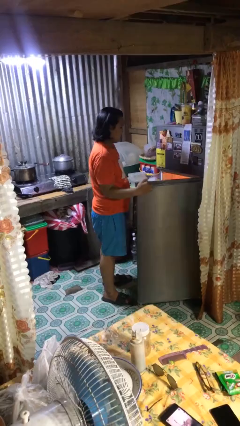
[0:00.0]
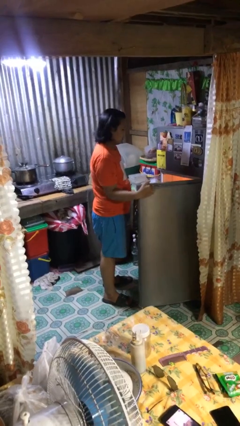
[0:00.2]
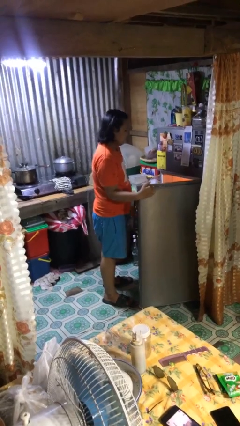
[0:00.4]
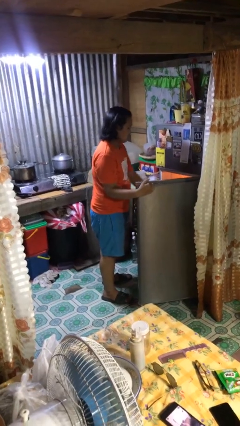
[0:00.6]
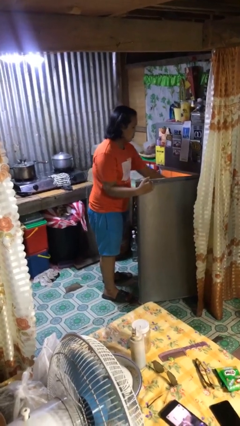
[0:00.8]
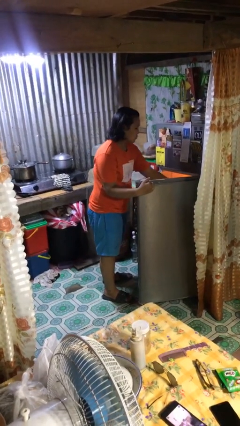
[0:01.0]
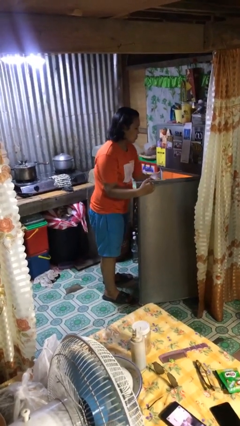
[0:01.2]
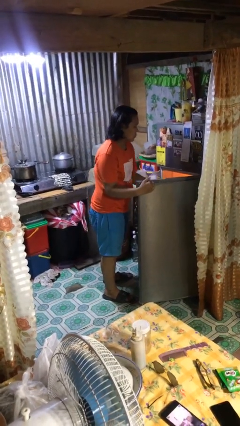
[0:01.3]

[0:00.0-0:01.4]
person takes object from refrigerator

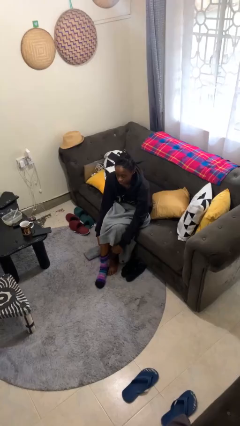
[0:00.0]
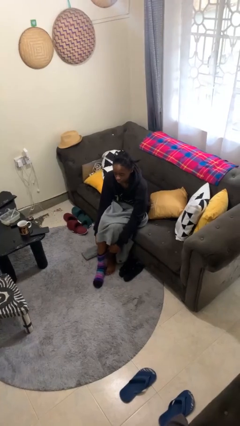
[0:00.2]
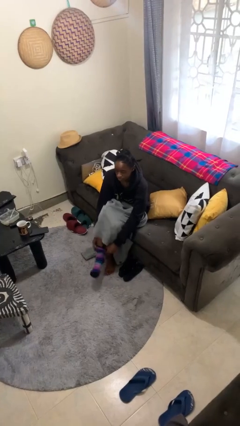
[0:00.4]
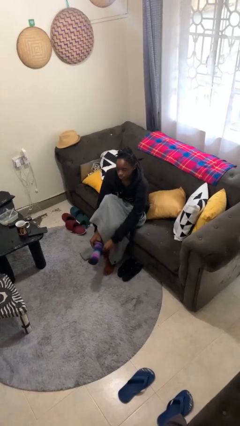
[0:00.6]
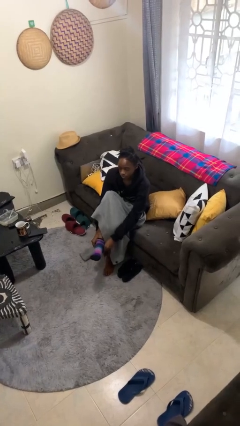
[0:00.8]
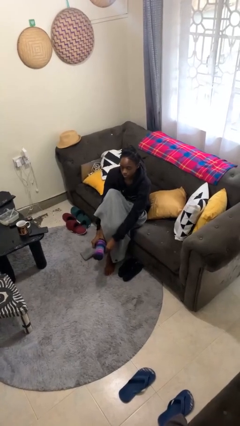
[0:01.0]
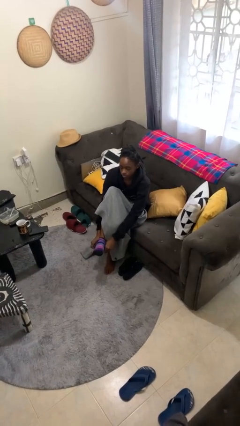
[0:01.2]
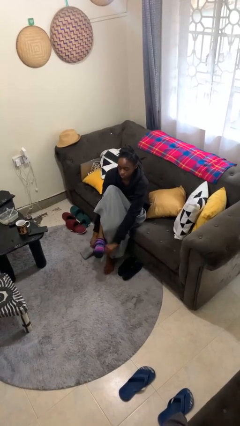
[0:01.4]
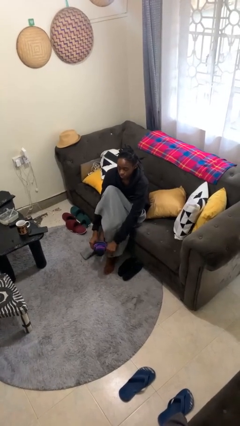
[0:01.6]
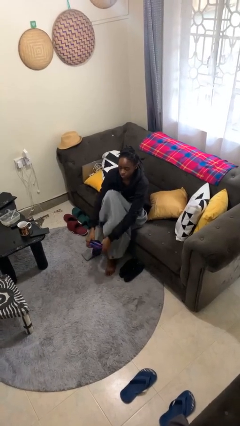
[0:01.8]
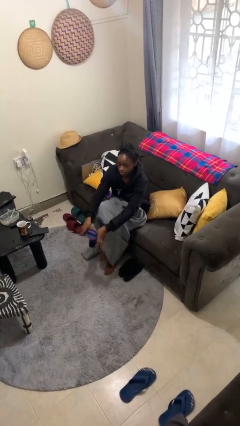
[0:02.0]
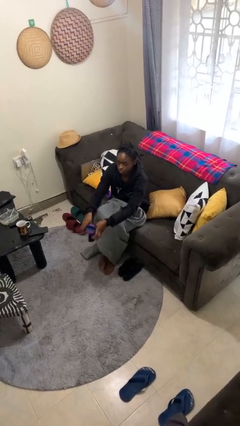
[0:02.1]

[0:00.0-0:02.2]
person takes off socks

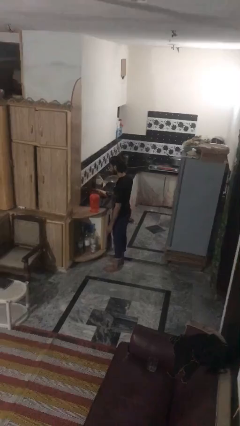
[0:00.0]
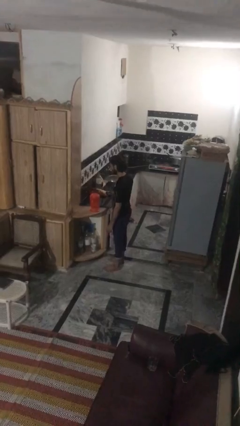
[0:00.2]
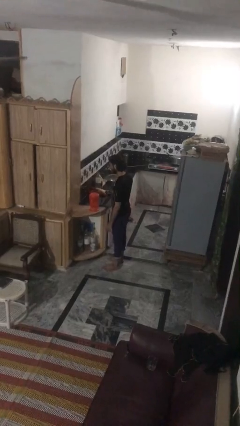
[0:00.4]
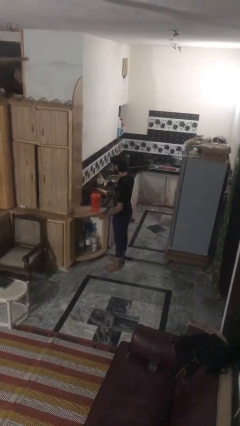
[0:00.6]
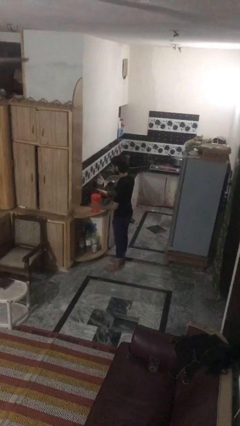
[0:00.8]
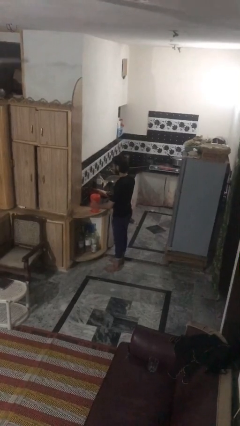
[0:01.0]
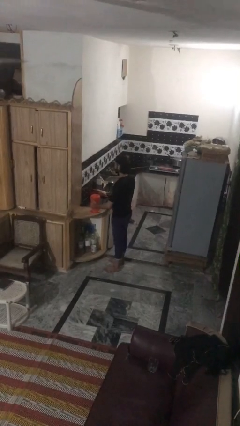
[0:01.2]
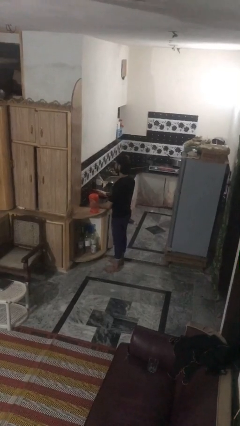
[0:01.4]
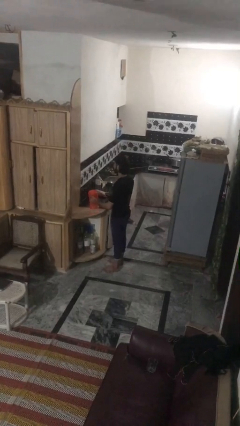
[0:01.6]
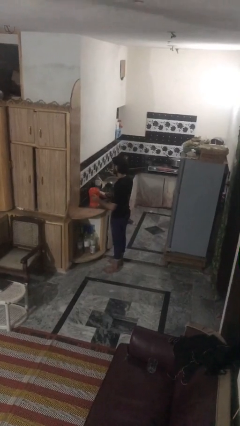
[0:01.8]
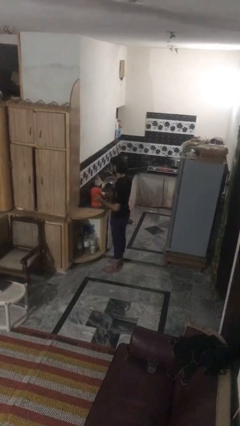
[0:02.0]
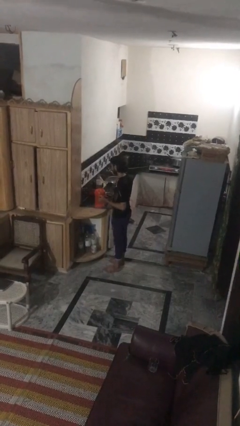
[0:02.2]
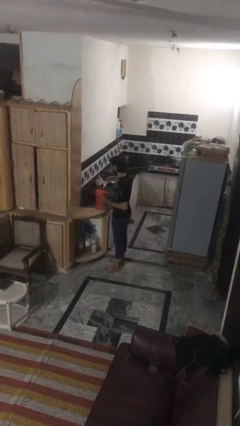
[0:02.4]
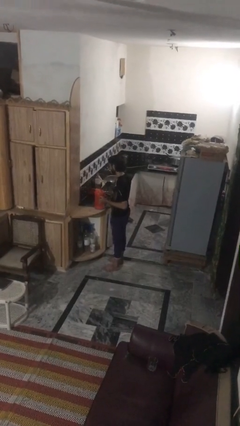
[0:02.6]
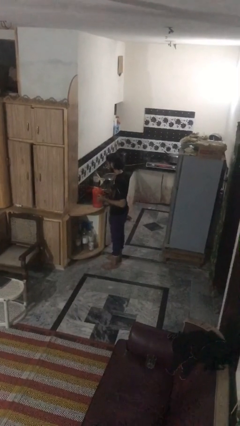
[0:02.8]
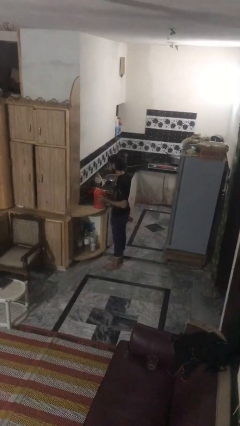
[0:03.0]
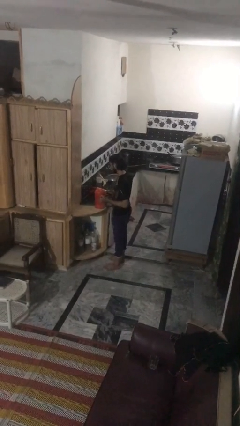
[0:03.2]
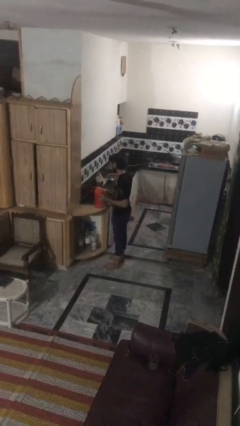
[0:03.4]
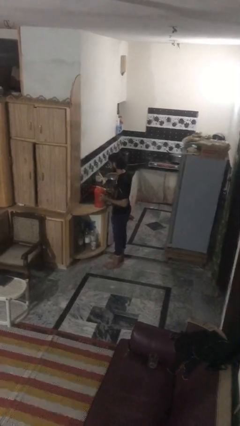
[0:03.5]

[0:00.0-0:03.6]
person picks up object from countertop

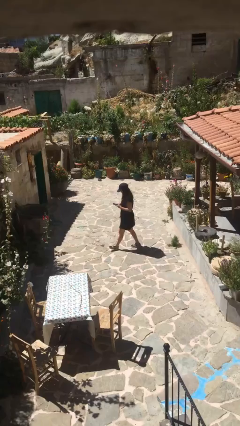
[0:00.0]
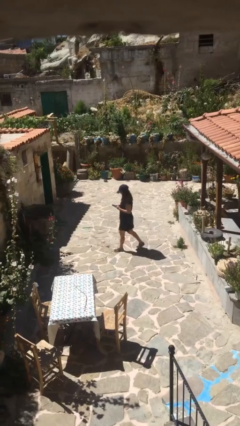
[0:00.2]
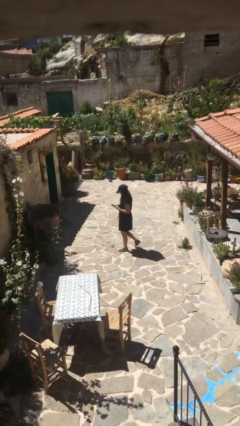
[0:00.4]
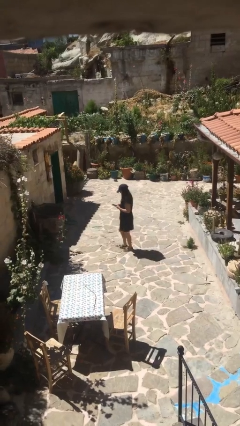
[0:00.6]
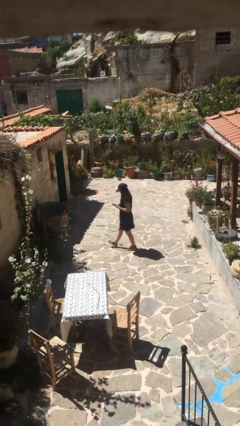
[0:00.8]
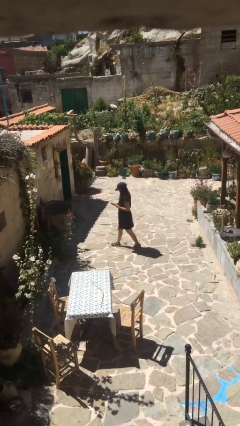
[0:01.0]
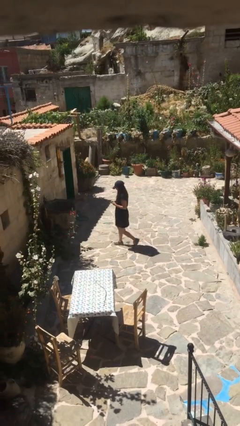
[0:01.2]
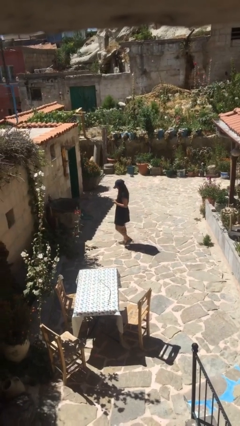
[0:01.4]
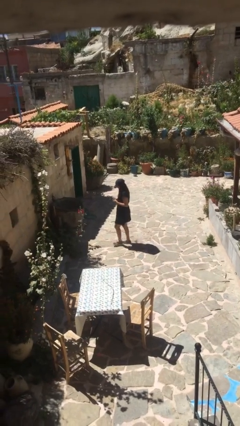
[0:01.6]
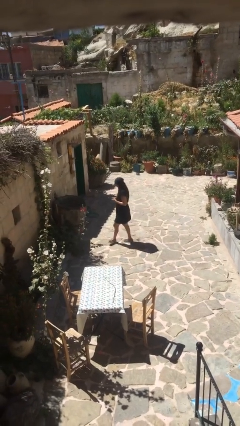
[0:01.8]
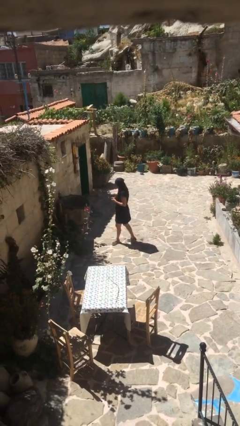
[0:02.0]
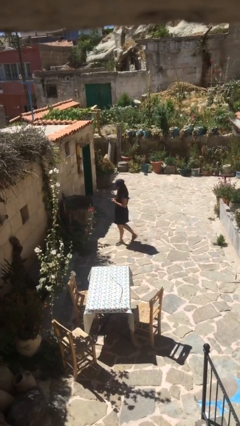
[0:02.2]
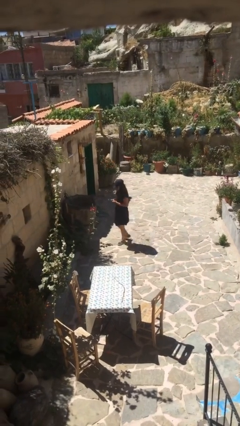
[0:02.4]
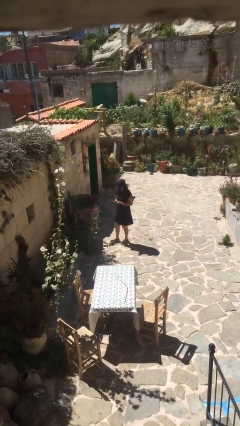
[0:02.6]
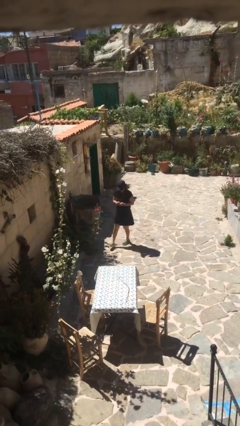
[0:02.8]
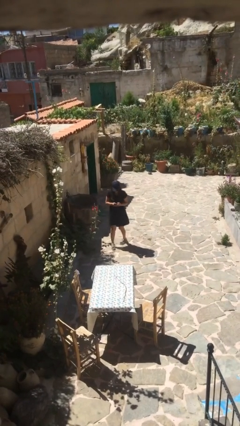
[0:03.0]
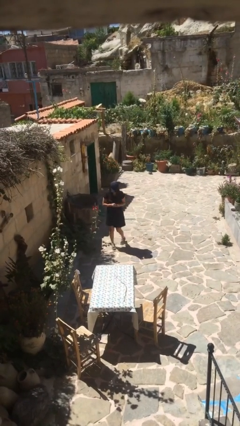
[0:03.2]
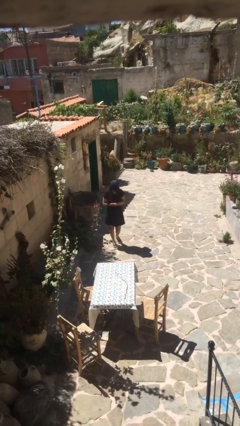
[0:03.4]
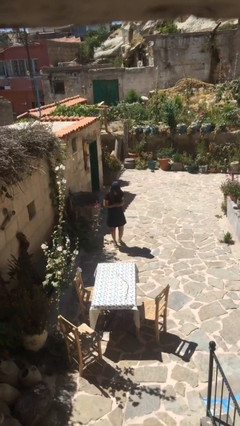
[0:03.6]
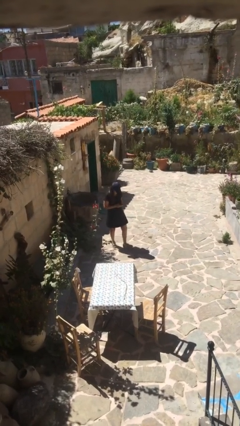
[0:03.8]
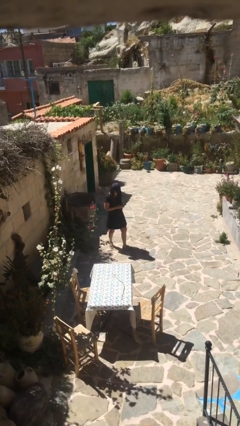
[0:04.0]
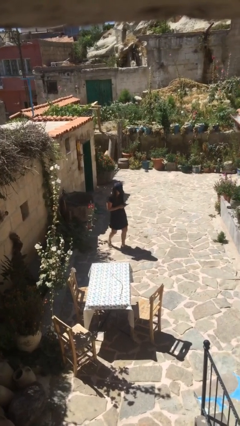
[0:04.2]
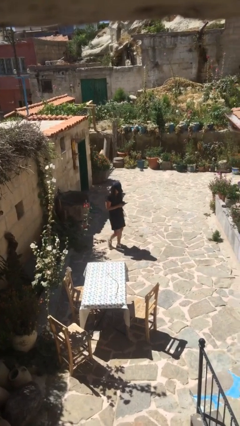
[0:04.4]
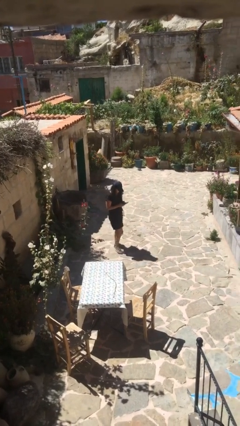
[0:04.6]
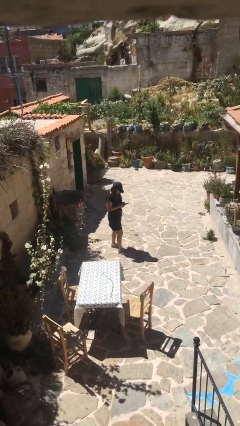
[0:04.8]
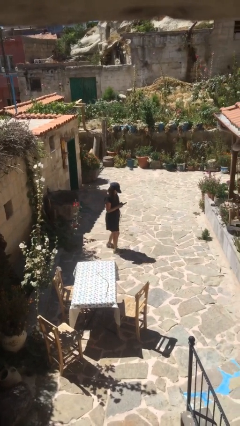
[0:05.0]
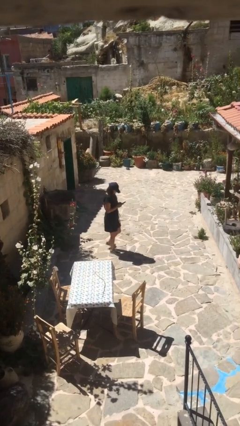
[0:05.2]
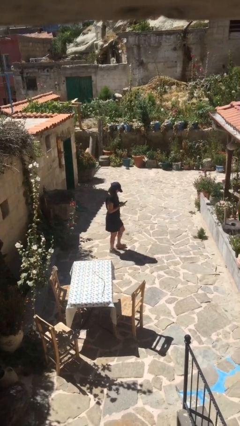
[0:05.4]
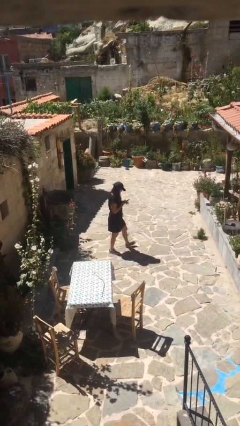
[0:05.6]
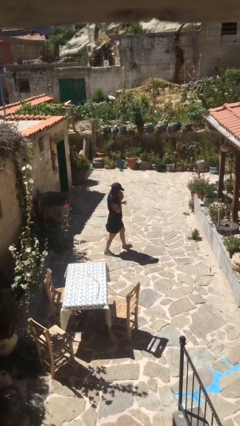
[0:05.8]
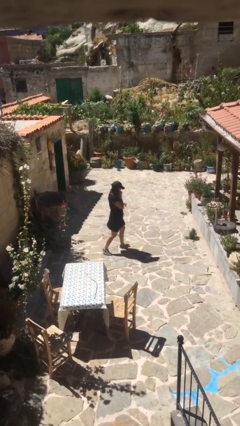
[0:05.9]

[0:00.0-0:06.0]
person texts on phone

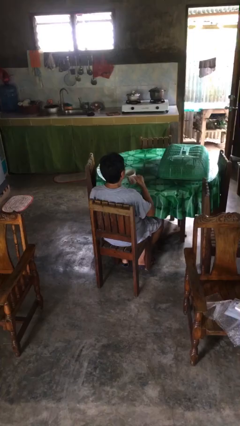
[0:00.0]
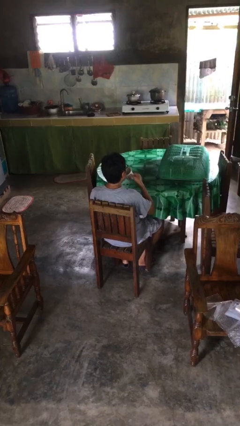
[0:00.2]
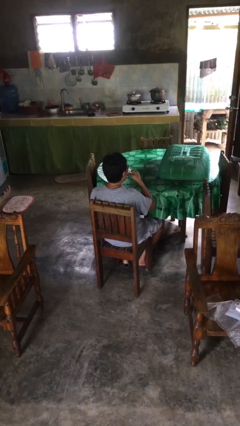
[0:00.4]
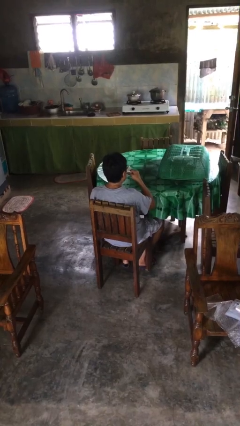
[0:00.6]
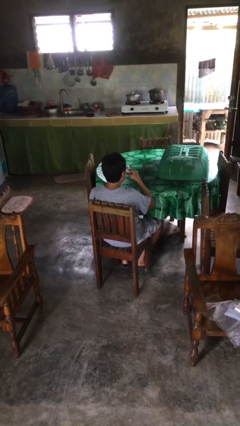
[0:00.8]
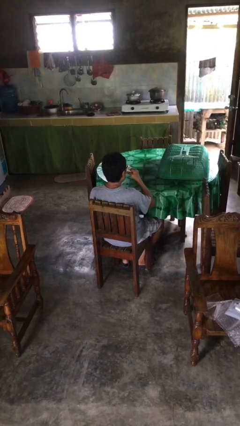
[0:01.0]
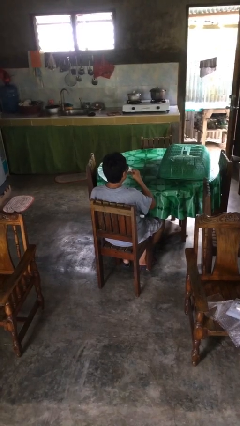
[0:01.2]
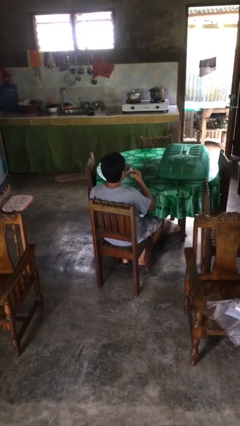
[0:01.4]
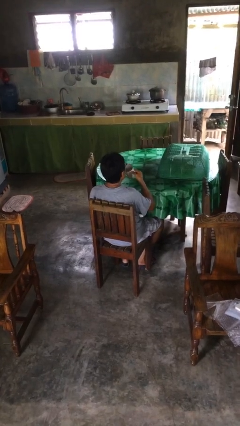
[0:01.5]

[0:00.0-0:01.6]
person drinks from mug

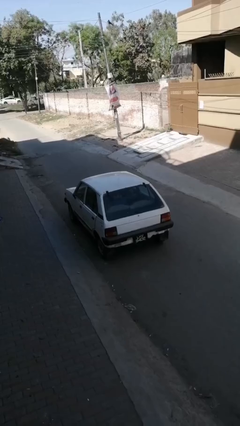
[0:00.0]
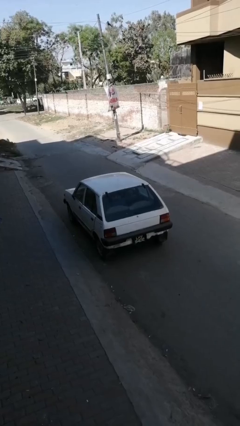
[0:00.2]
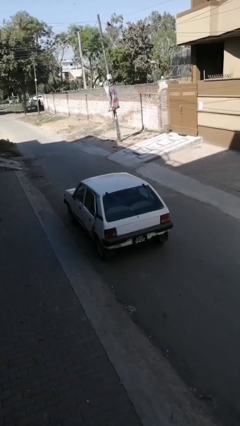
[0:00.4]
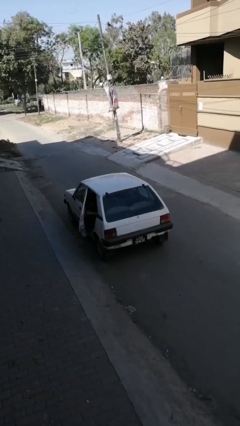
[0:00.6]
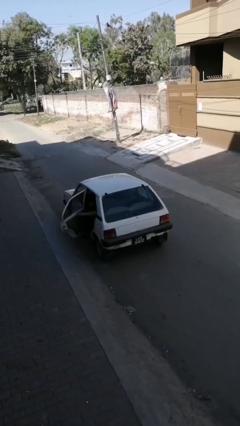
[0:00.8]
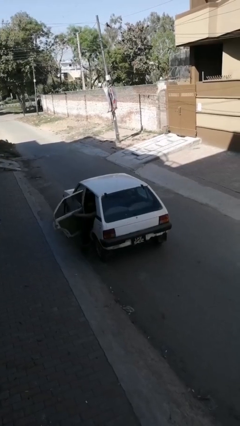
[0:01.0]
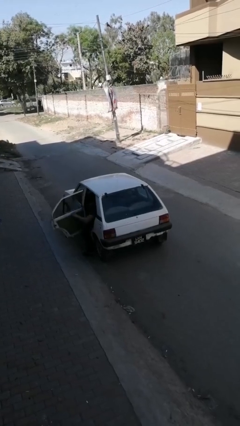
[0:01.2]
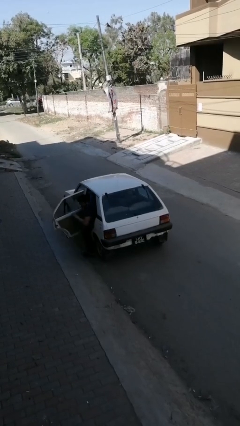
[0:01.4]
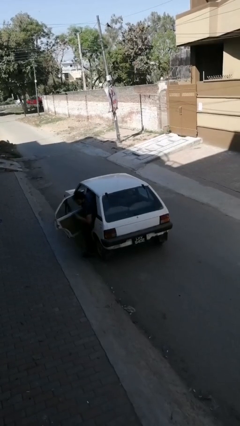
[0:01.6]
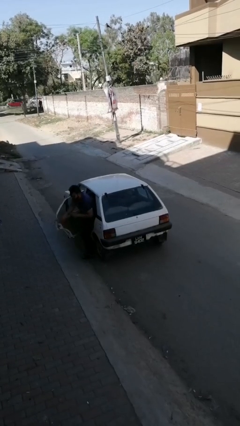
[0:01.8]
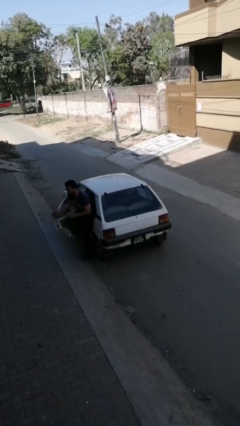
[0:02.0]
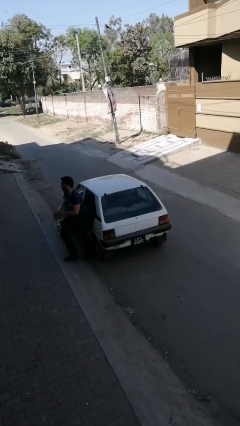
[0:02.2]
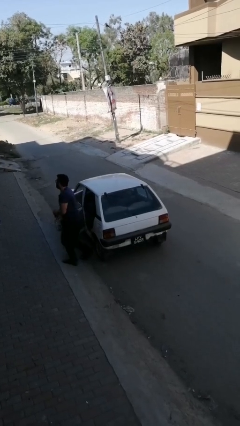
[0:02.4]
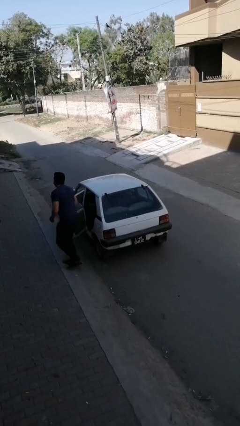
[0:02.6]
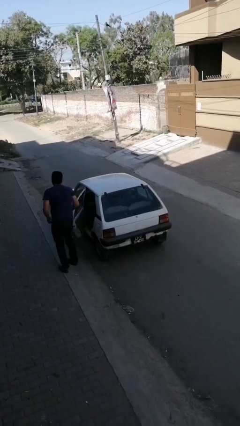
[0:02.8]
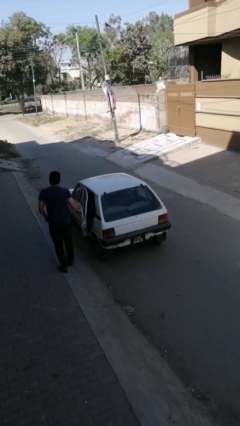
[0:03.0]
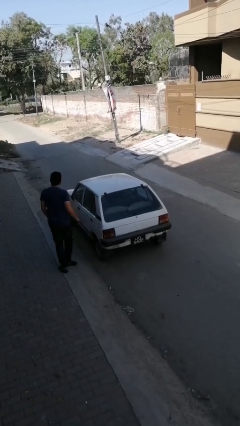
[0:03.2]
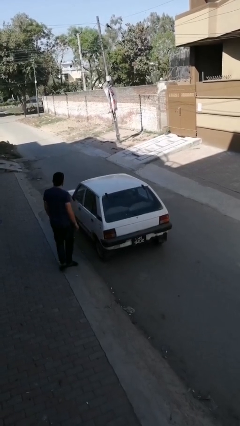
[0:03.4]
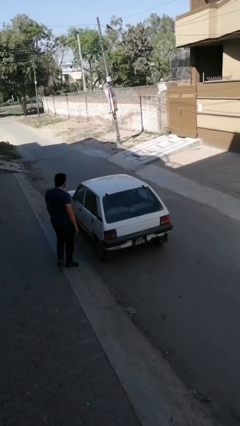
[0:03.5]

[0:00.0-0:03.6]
car drops off person
